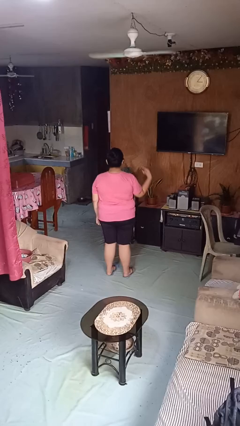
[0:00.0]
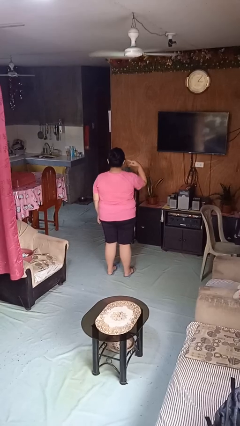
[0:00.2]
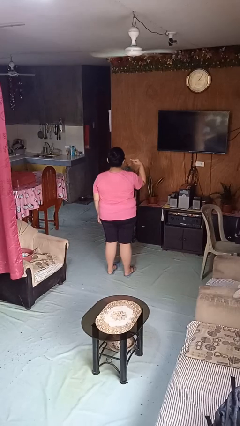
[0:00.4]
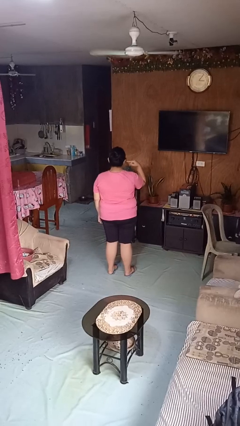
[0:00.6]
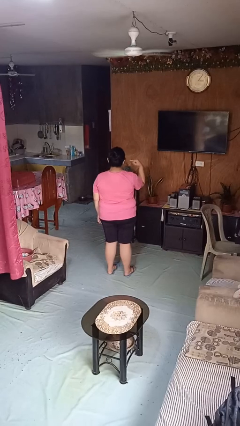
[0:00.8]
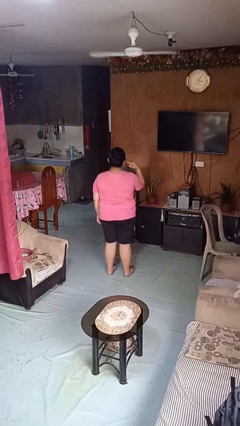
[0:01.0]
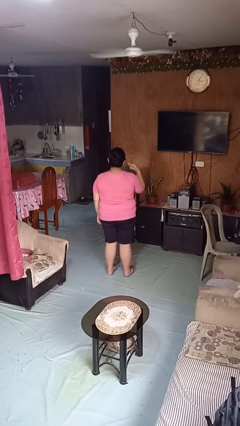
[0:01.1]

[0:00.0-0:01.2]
person gestures listen closely

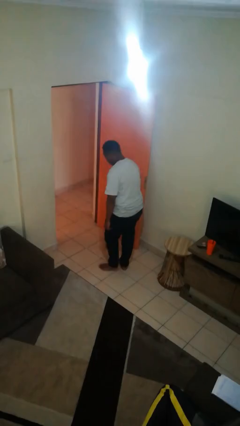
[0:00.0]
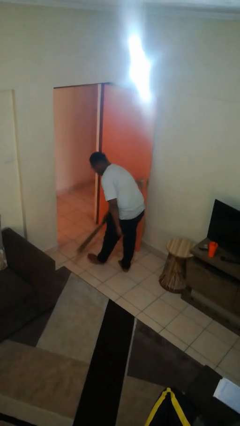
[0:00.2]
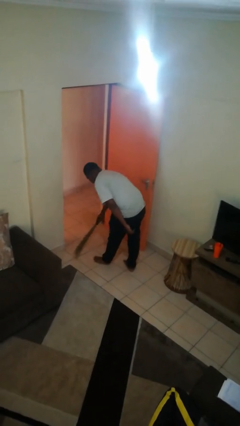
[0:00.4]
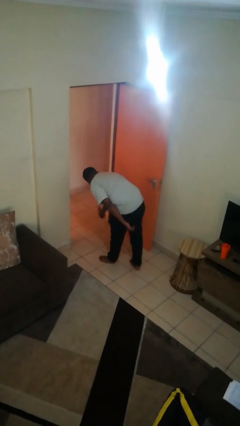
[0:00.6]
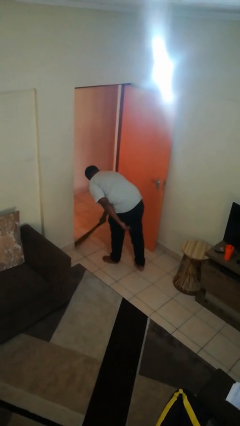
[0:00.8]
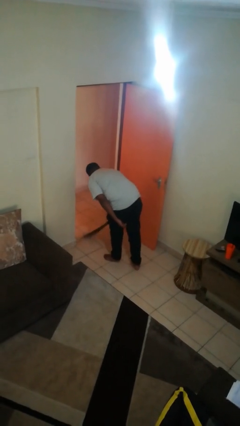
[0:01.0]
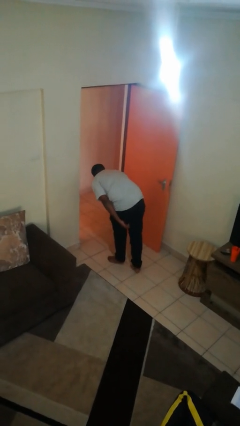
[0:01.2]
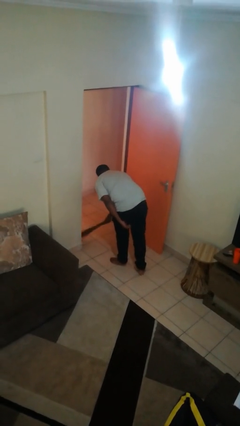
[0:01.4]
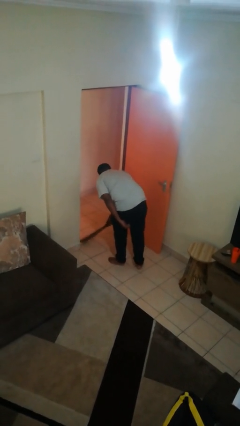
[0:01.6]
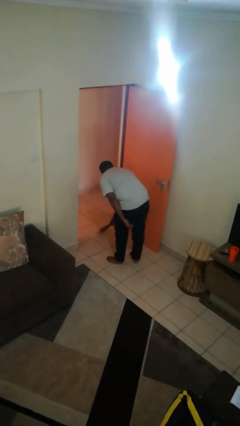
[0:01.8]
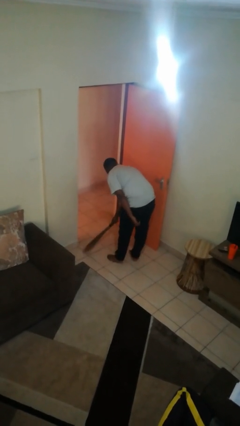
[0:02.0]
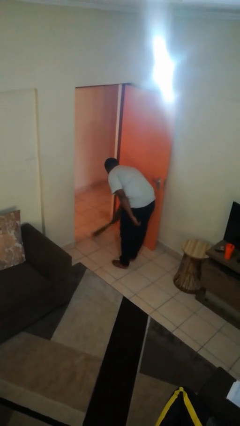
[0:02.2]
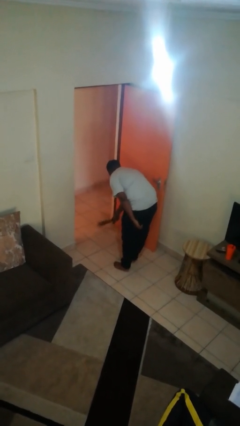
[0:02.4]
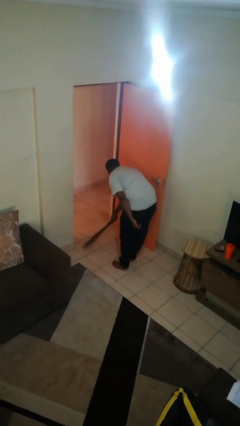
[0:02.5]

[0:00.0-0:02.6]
person sweeps floor

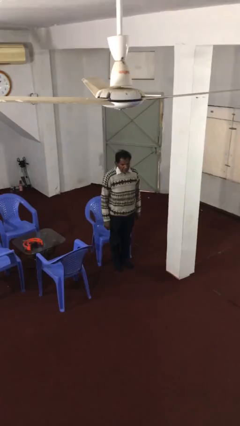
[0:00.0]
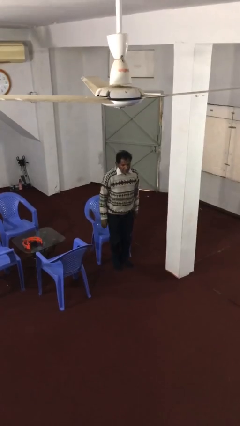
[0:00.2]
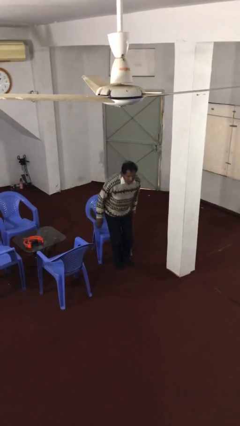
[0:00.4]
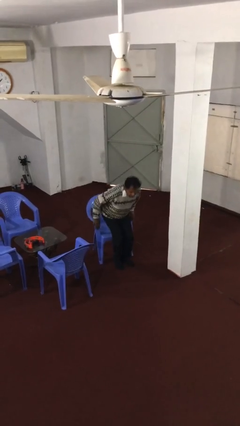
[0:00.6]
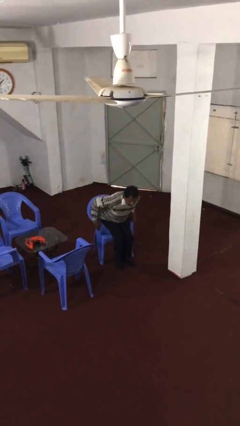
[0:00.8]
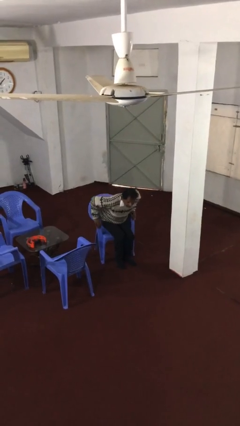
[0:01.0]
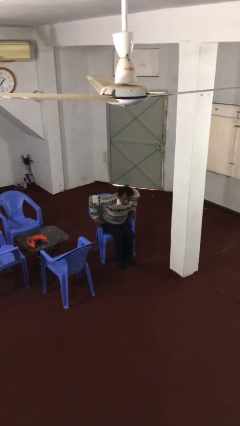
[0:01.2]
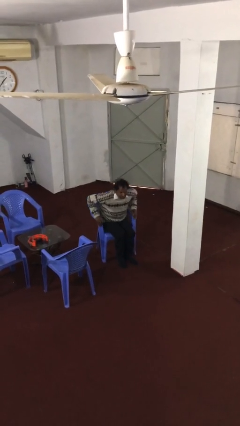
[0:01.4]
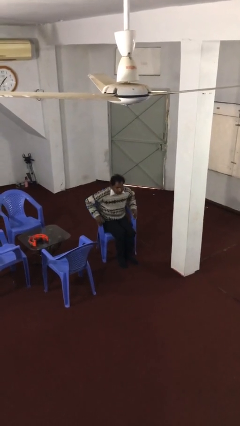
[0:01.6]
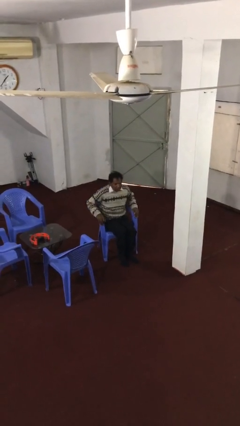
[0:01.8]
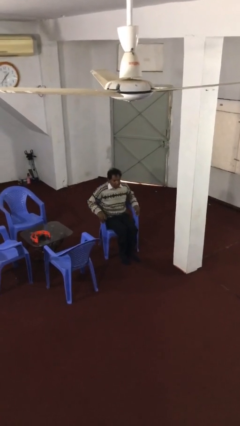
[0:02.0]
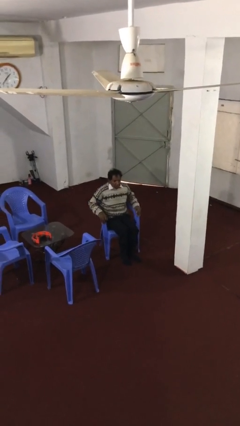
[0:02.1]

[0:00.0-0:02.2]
person sits down

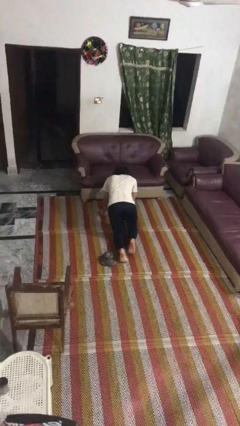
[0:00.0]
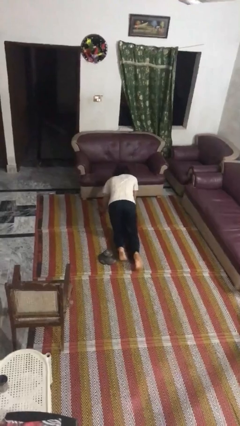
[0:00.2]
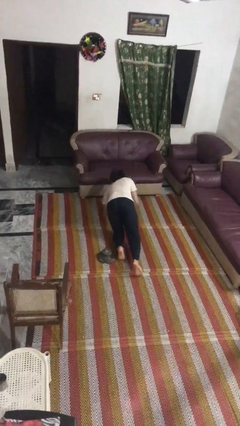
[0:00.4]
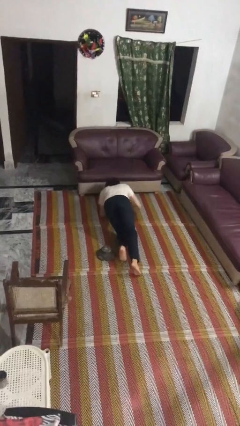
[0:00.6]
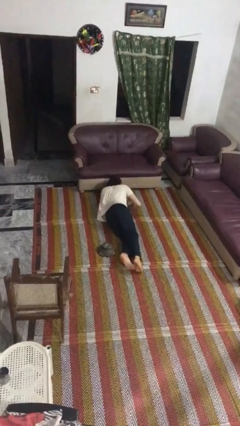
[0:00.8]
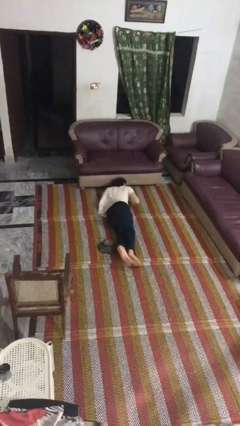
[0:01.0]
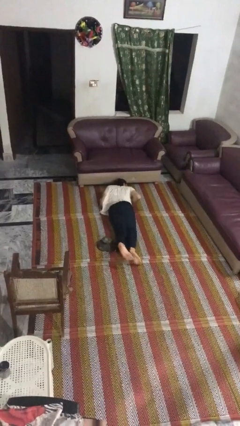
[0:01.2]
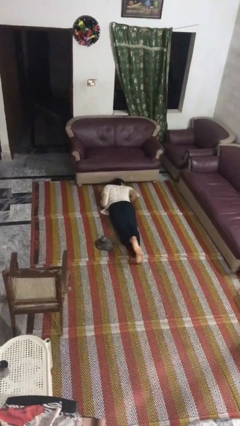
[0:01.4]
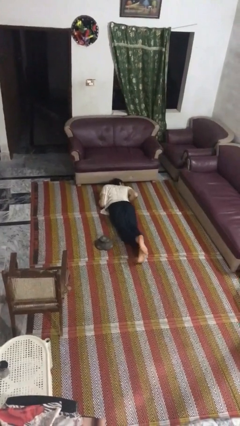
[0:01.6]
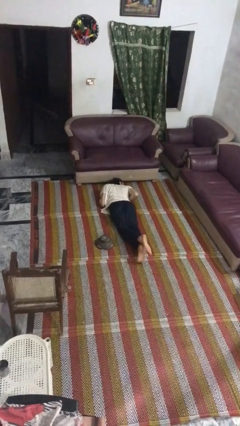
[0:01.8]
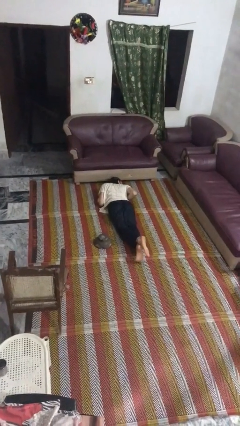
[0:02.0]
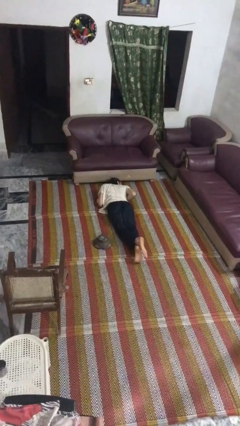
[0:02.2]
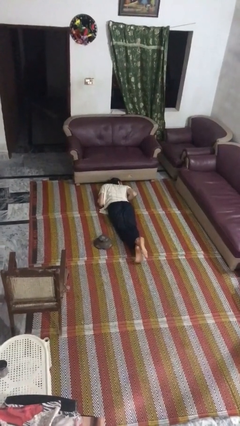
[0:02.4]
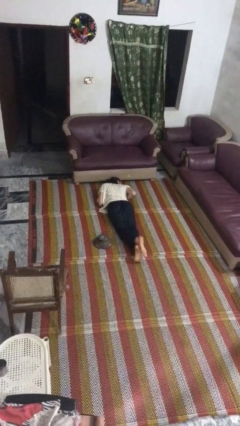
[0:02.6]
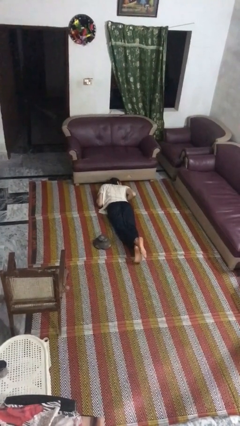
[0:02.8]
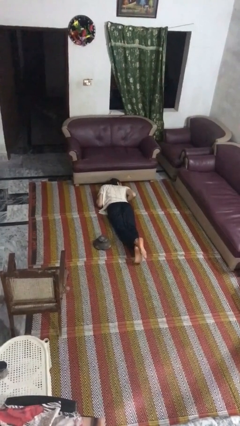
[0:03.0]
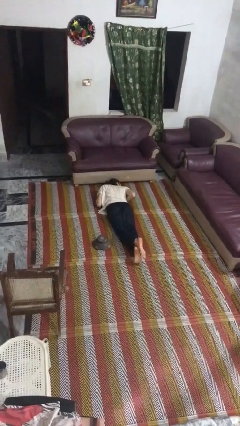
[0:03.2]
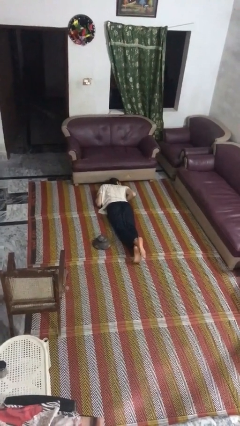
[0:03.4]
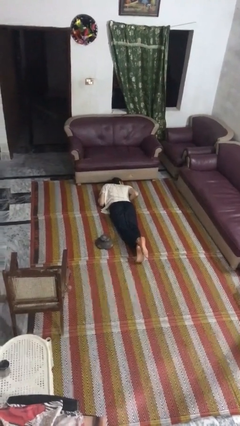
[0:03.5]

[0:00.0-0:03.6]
person lies down on floor

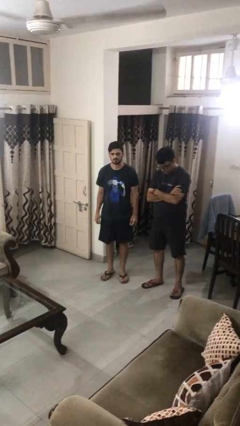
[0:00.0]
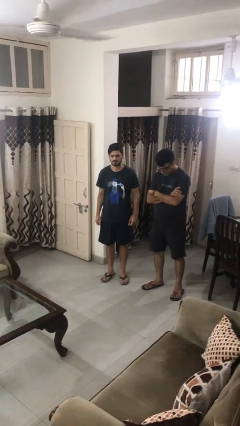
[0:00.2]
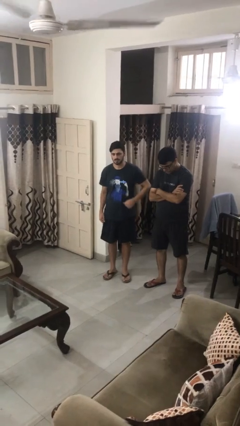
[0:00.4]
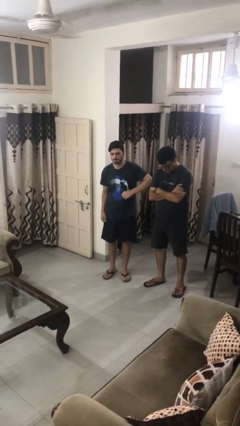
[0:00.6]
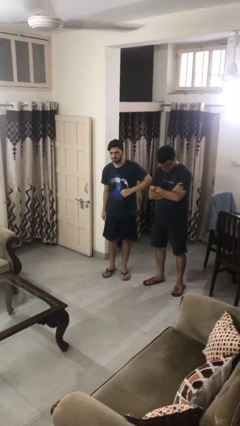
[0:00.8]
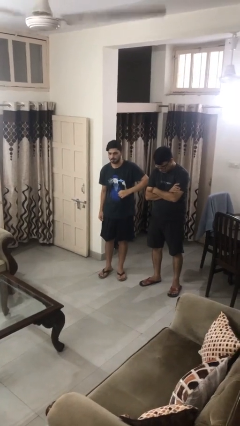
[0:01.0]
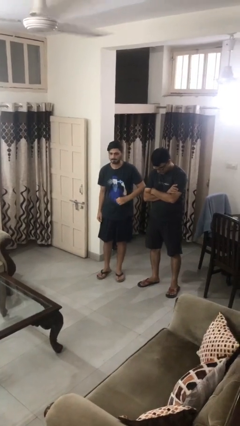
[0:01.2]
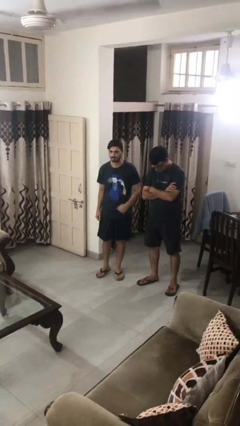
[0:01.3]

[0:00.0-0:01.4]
person nudges person with elbow

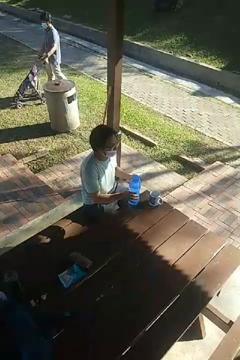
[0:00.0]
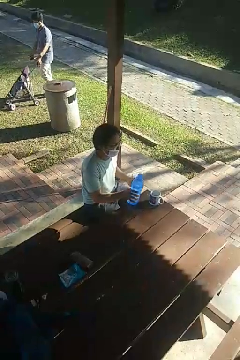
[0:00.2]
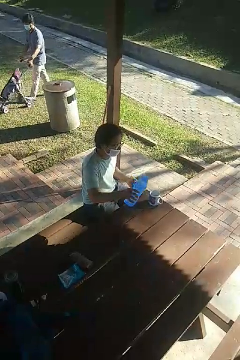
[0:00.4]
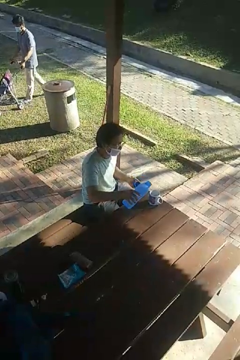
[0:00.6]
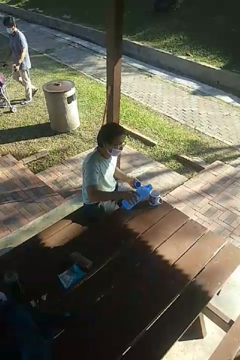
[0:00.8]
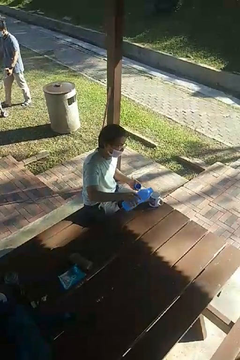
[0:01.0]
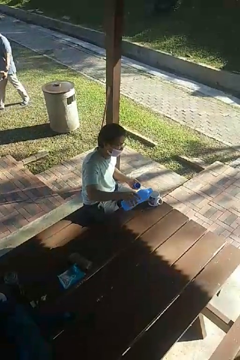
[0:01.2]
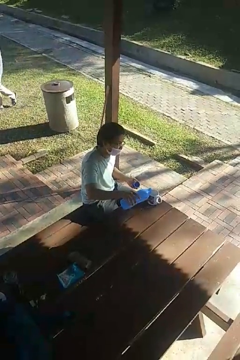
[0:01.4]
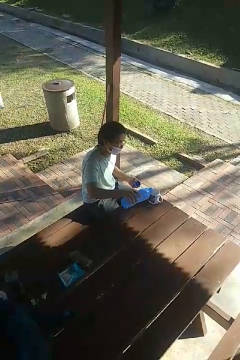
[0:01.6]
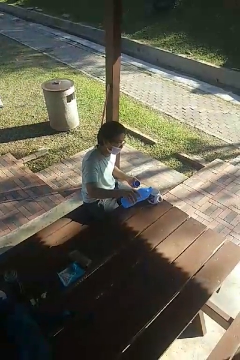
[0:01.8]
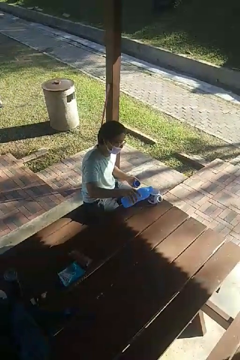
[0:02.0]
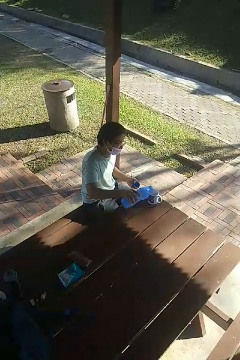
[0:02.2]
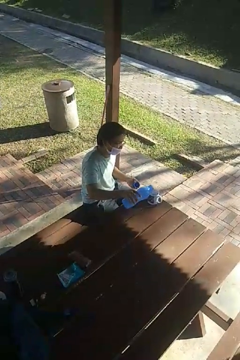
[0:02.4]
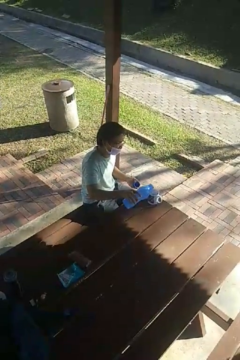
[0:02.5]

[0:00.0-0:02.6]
person pours liquid into cup

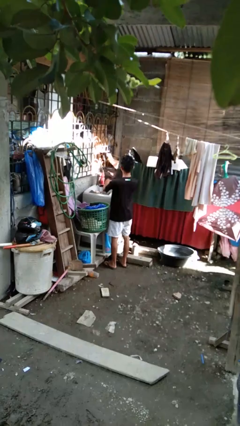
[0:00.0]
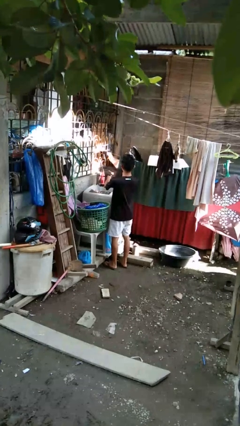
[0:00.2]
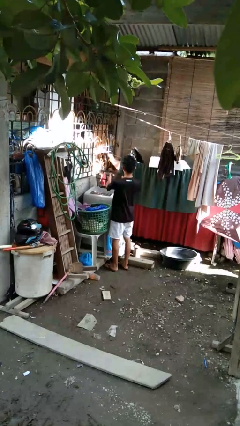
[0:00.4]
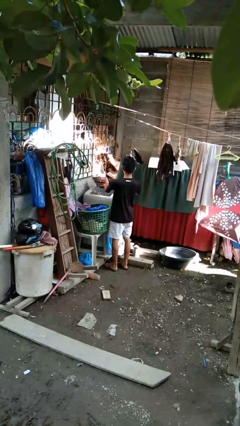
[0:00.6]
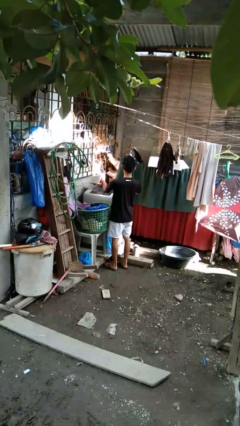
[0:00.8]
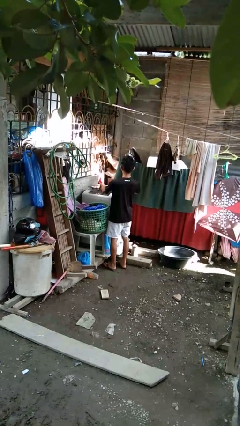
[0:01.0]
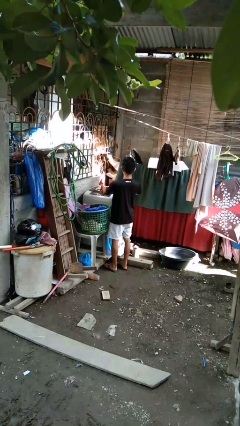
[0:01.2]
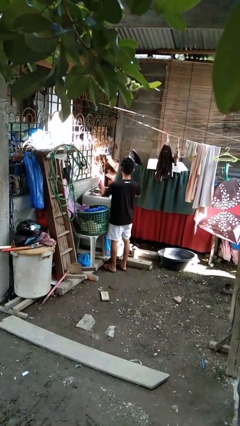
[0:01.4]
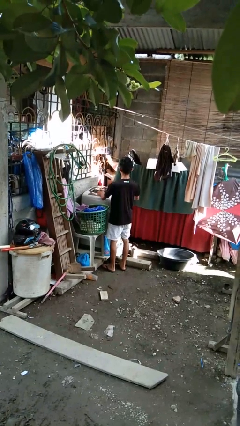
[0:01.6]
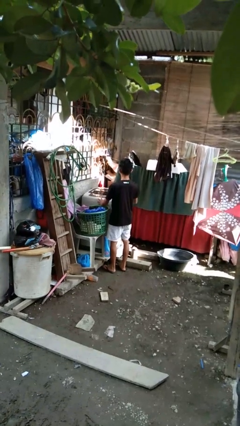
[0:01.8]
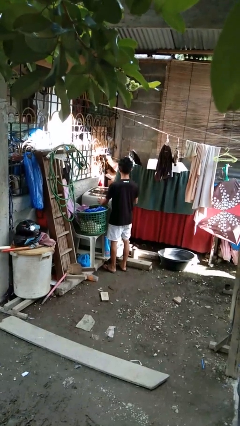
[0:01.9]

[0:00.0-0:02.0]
person closes clothes washer

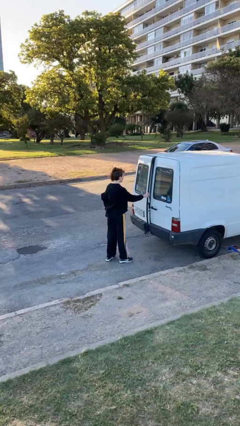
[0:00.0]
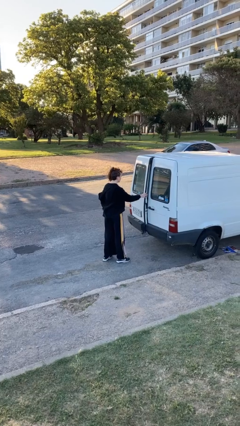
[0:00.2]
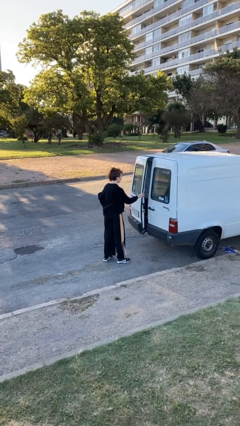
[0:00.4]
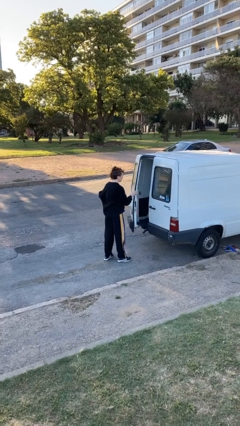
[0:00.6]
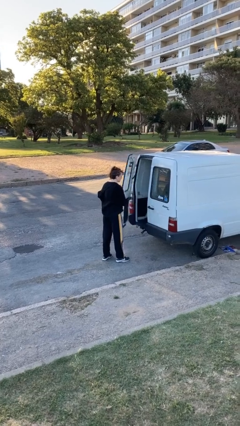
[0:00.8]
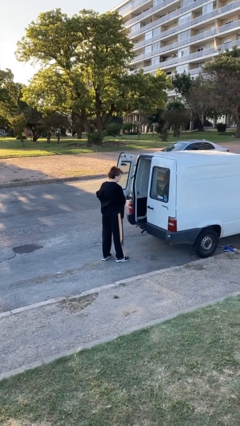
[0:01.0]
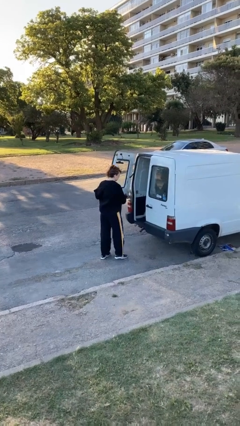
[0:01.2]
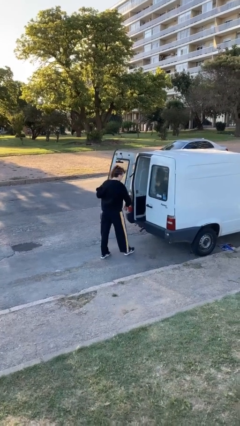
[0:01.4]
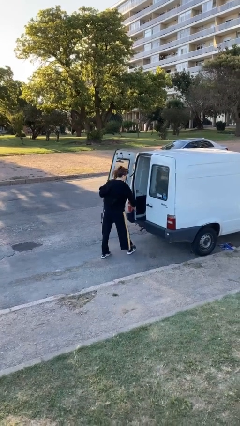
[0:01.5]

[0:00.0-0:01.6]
person opens car door

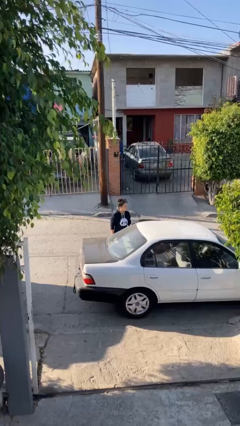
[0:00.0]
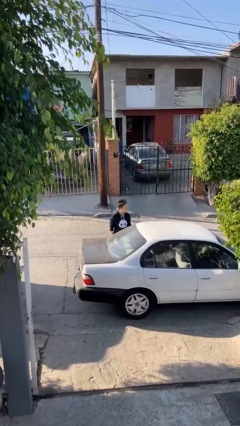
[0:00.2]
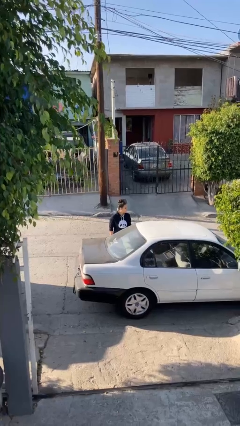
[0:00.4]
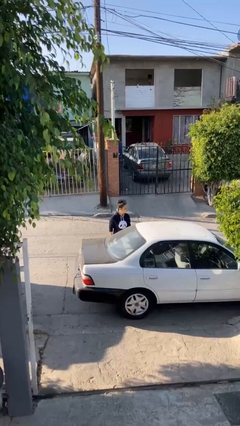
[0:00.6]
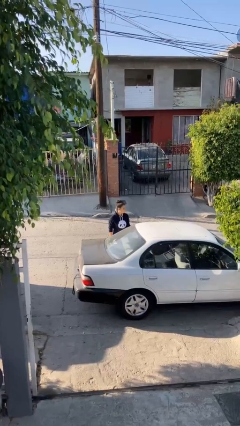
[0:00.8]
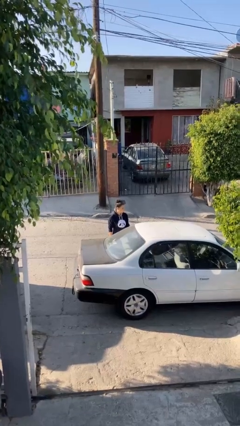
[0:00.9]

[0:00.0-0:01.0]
person closes car door
